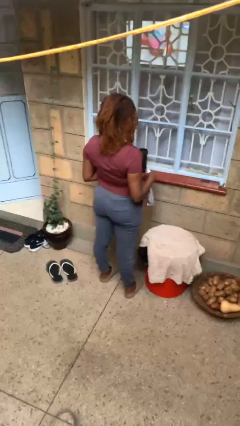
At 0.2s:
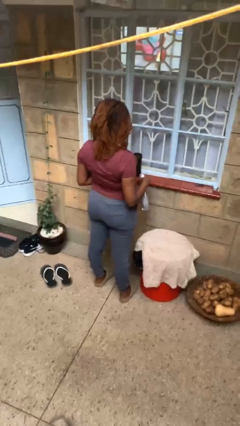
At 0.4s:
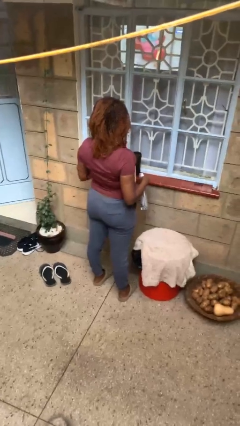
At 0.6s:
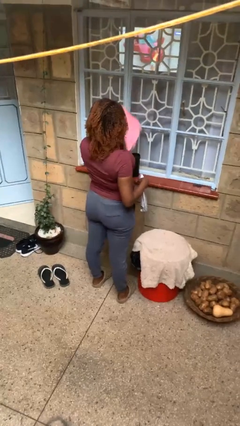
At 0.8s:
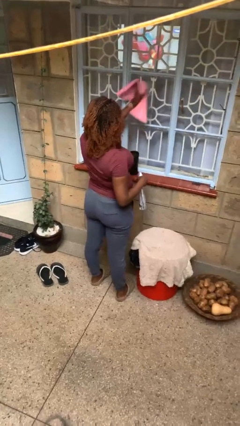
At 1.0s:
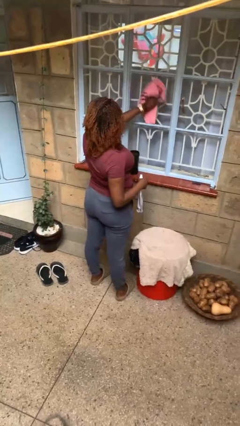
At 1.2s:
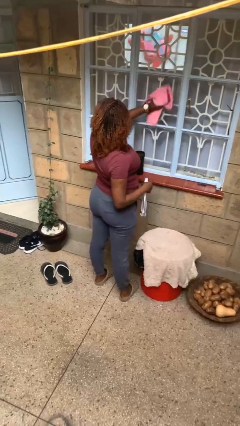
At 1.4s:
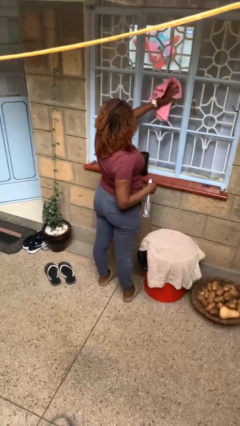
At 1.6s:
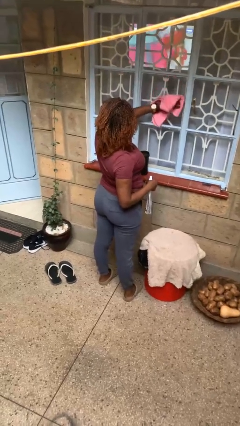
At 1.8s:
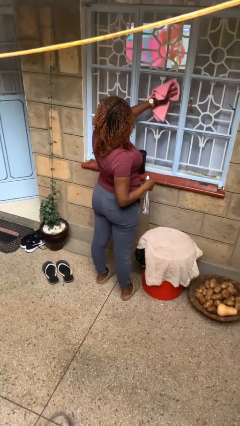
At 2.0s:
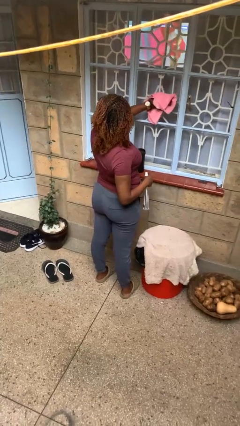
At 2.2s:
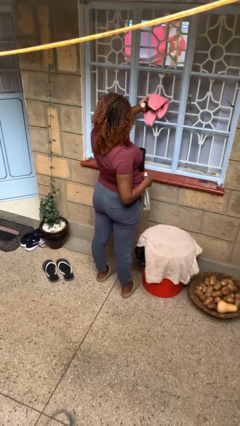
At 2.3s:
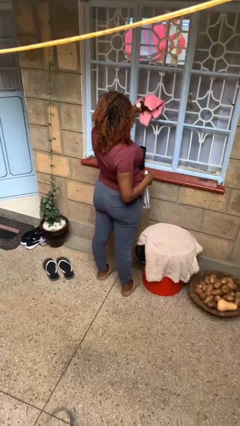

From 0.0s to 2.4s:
person washes window

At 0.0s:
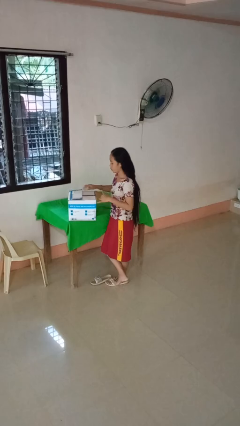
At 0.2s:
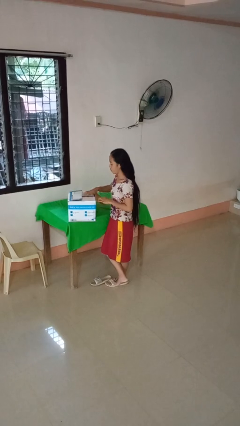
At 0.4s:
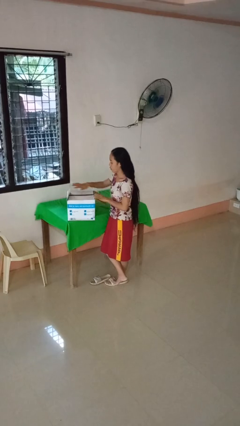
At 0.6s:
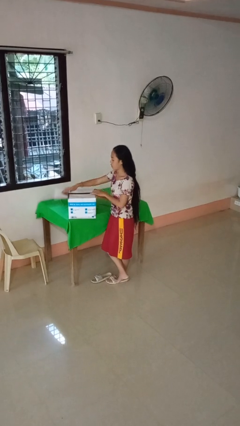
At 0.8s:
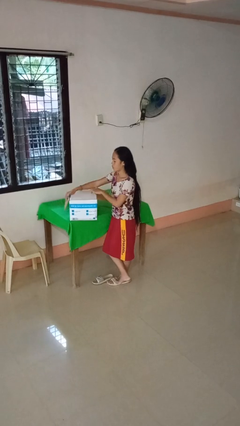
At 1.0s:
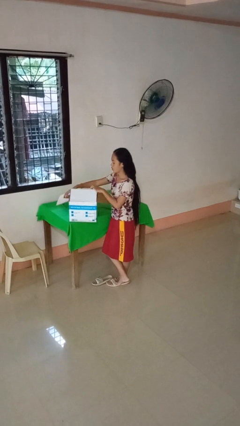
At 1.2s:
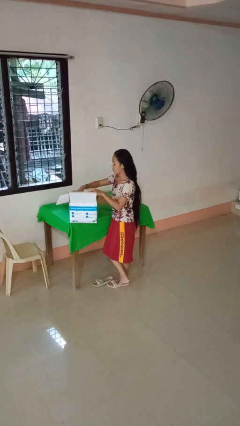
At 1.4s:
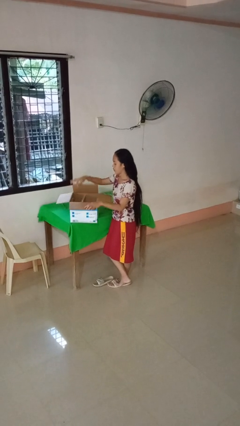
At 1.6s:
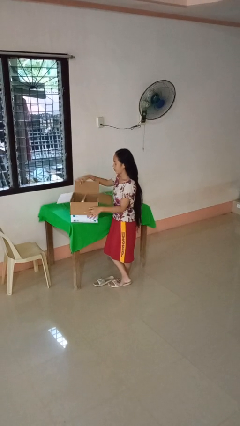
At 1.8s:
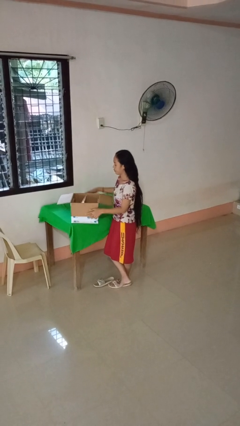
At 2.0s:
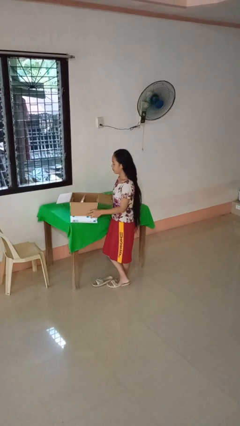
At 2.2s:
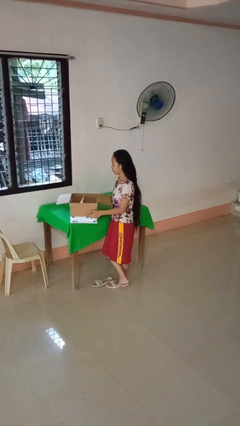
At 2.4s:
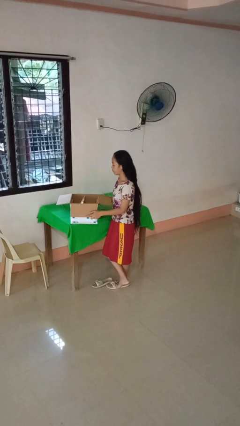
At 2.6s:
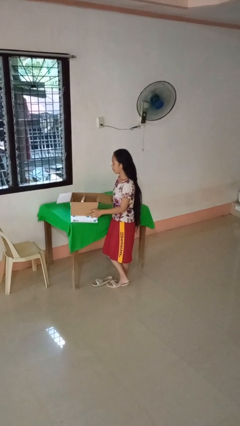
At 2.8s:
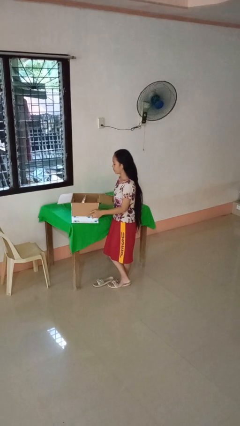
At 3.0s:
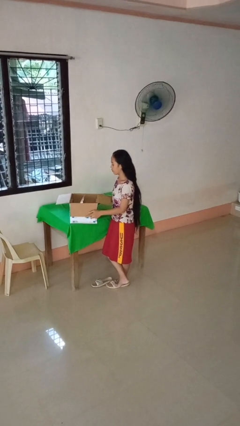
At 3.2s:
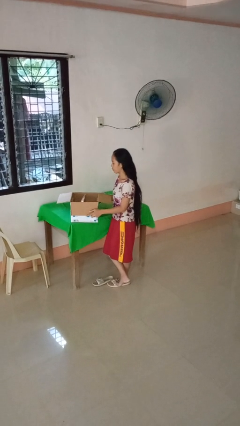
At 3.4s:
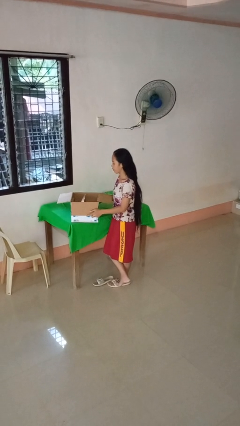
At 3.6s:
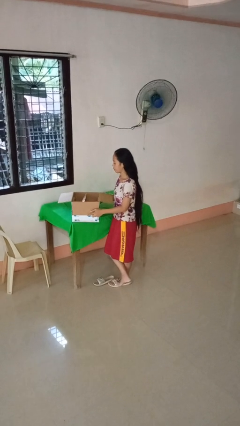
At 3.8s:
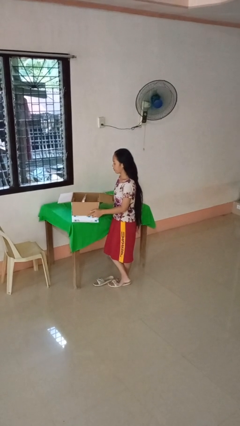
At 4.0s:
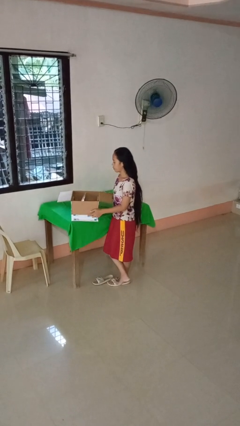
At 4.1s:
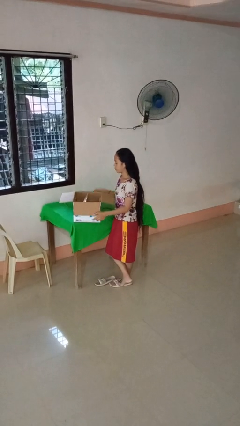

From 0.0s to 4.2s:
person opens box

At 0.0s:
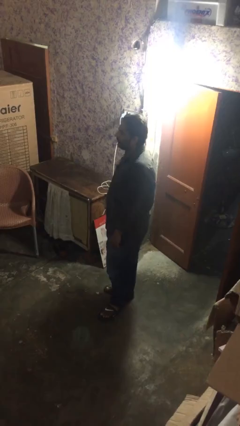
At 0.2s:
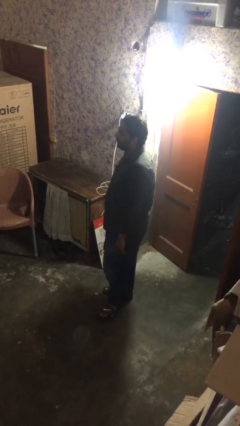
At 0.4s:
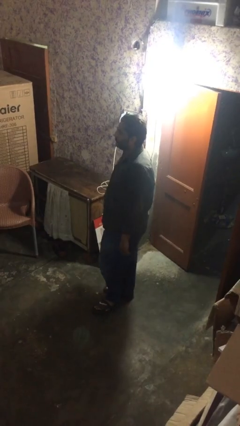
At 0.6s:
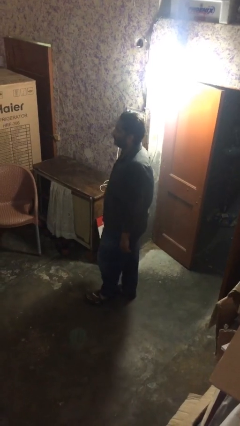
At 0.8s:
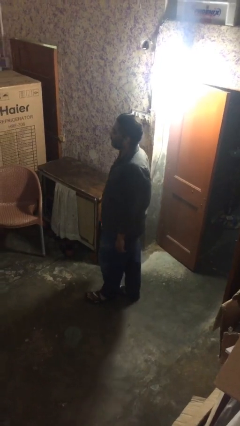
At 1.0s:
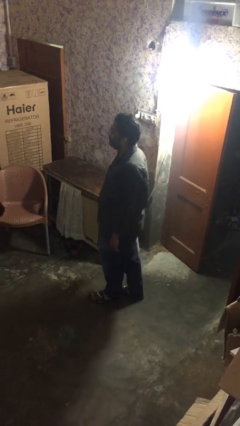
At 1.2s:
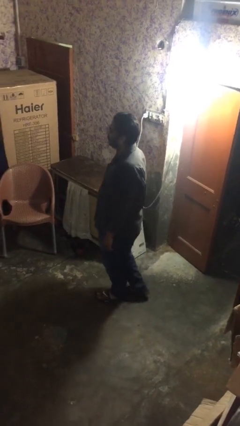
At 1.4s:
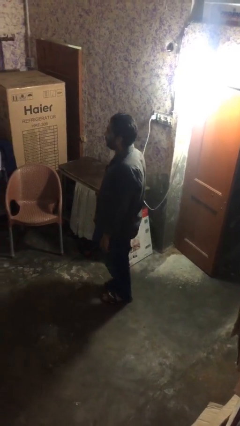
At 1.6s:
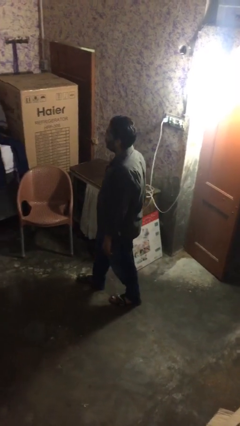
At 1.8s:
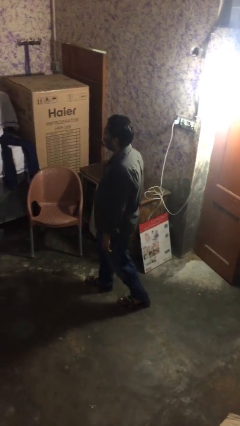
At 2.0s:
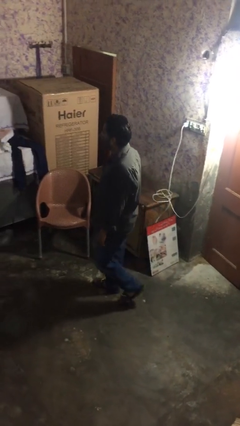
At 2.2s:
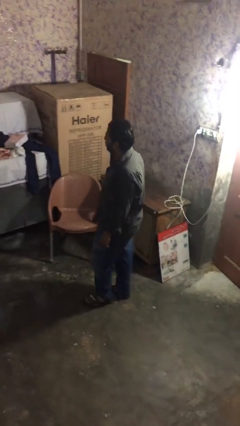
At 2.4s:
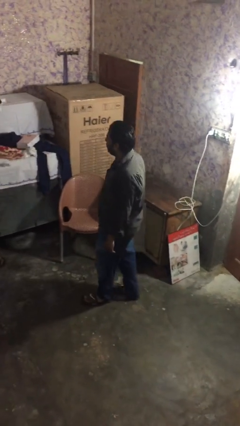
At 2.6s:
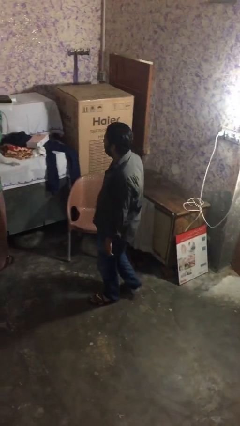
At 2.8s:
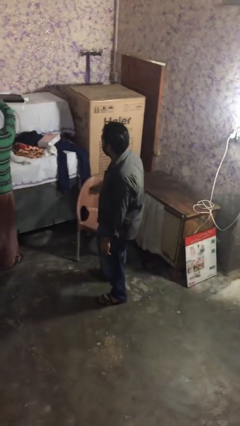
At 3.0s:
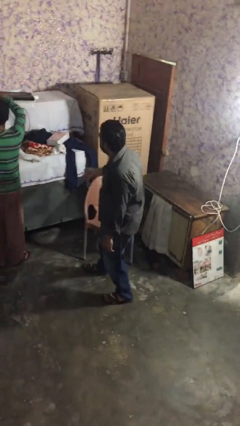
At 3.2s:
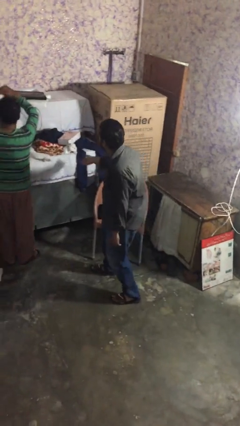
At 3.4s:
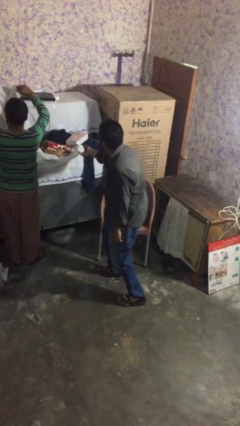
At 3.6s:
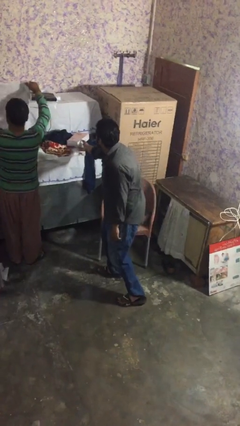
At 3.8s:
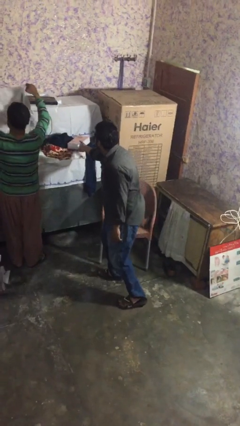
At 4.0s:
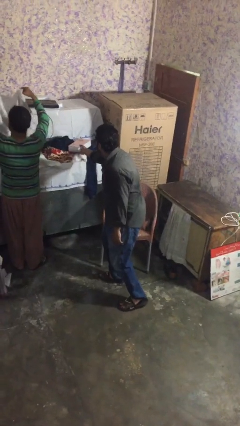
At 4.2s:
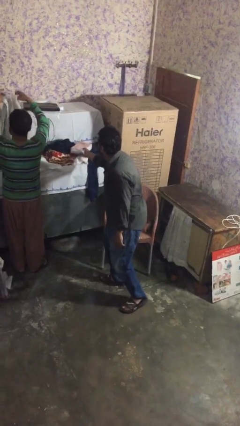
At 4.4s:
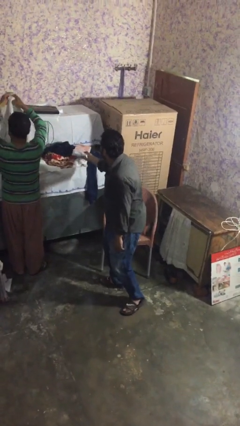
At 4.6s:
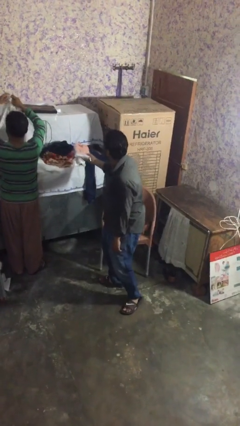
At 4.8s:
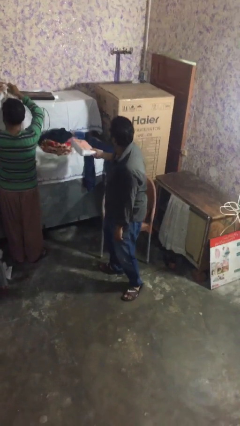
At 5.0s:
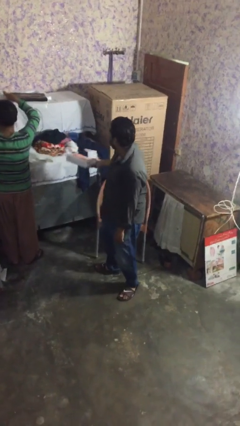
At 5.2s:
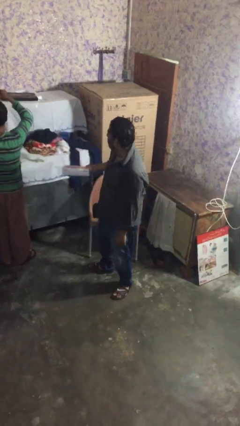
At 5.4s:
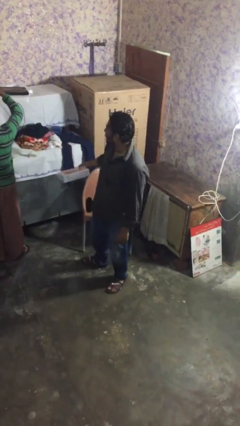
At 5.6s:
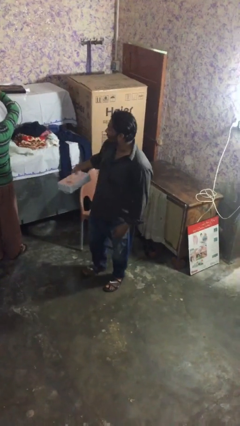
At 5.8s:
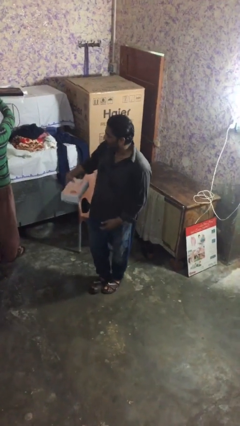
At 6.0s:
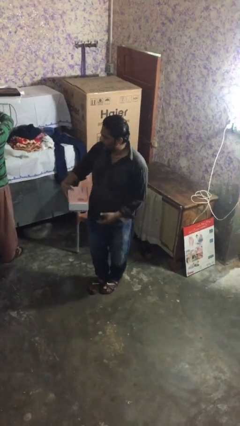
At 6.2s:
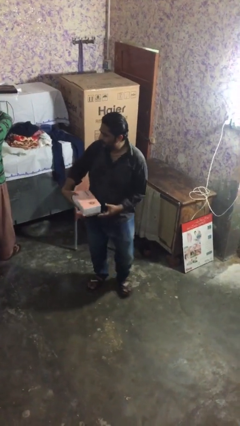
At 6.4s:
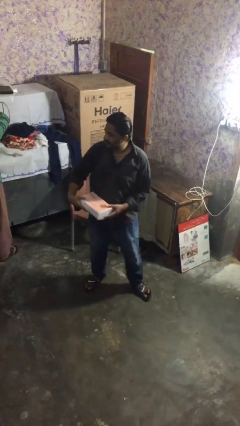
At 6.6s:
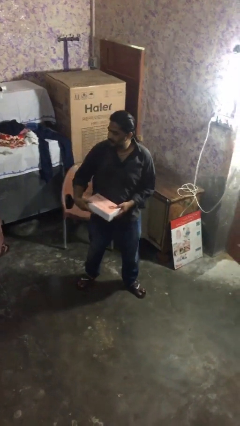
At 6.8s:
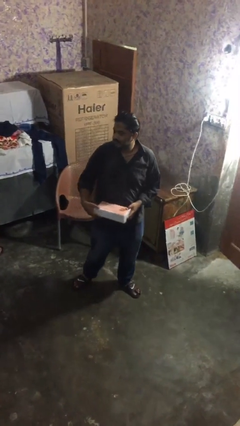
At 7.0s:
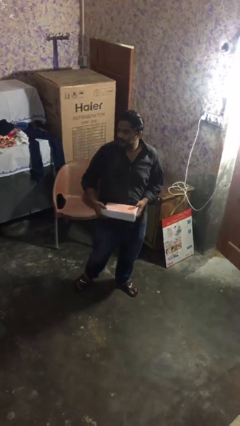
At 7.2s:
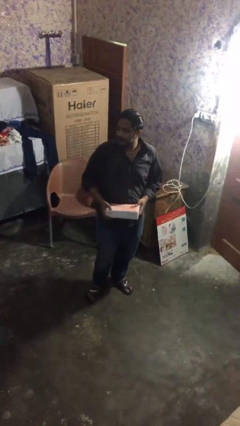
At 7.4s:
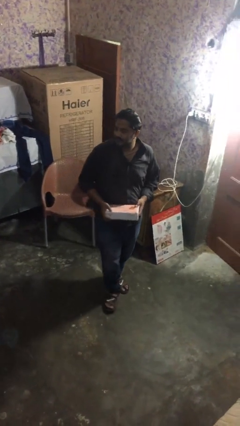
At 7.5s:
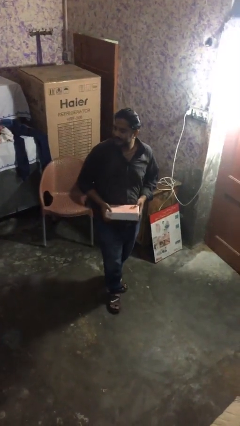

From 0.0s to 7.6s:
person steals object from person

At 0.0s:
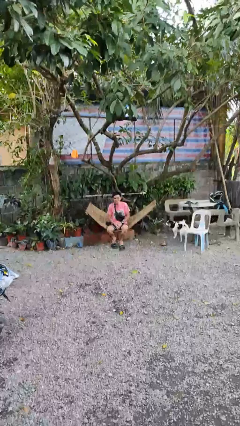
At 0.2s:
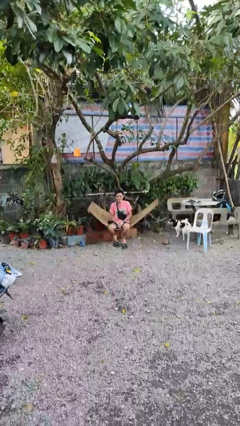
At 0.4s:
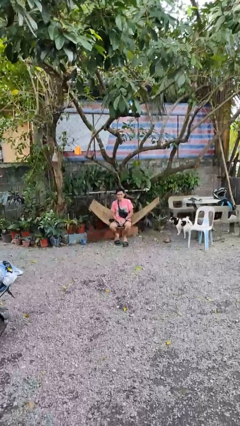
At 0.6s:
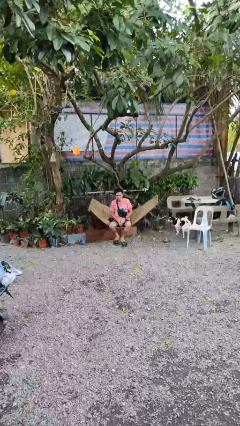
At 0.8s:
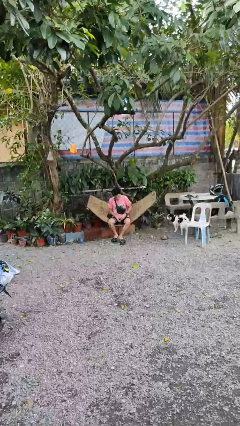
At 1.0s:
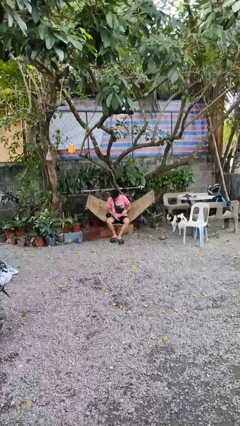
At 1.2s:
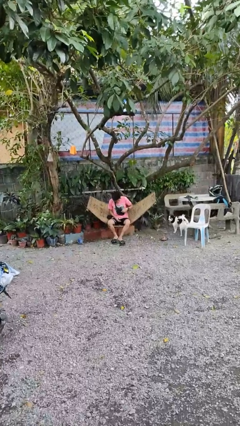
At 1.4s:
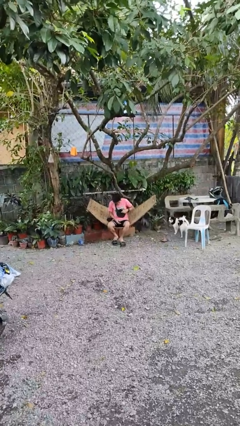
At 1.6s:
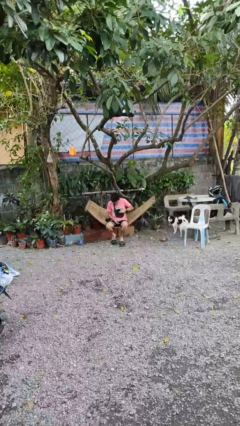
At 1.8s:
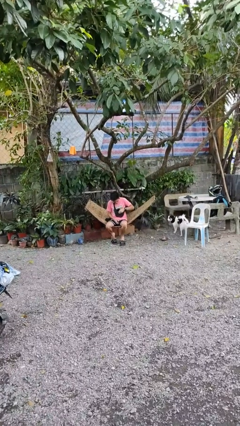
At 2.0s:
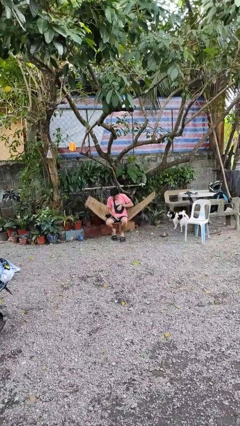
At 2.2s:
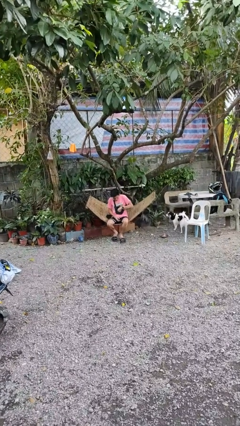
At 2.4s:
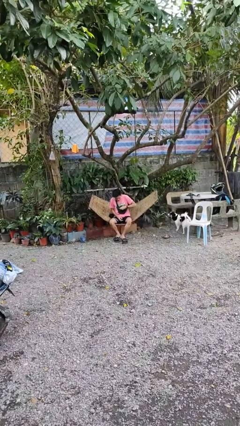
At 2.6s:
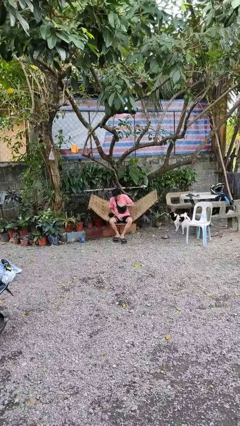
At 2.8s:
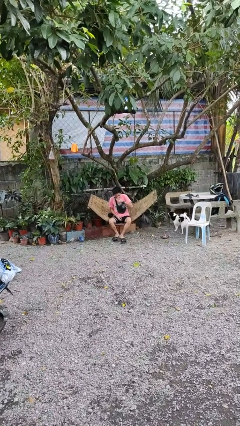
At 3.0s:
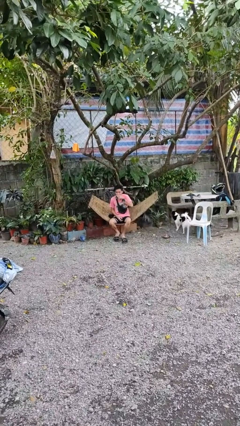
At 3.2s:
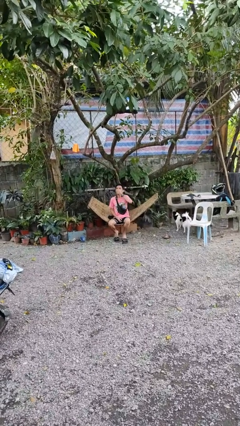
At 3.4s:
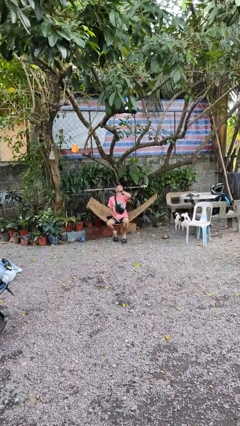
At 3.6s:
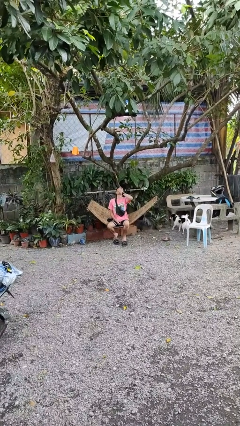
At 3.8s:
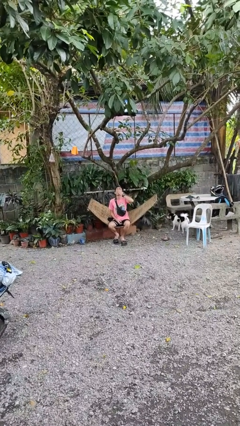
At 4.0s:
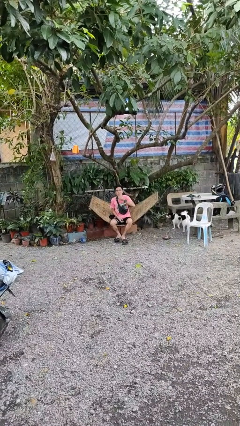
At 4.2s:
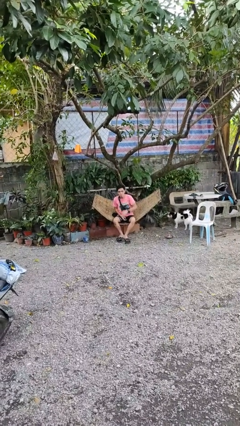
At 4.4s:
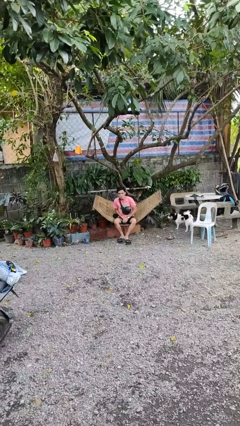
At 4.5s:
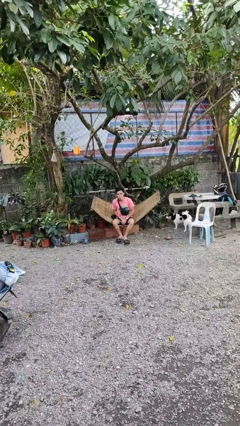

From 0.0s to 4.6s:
person eats snack from bag
